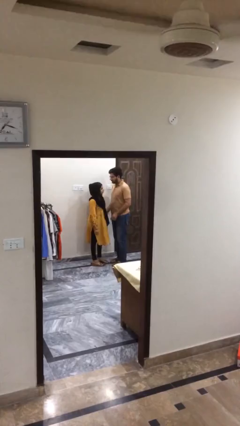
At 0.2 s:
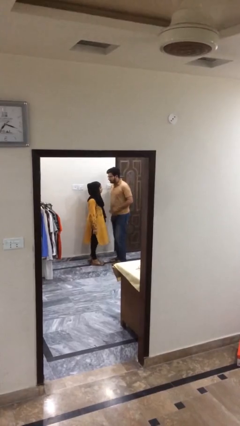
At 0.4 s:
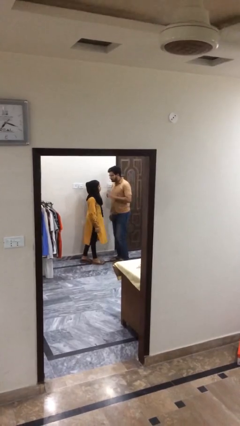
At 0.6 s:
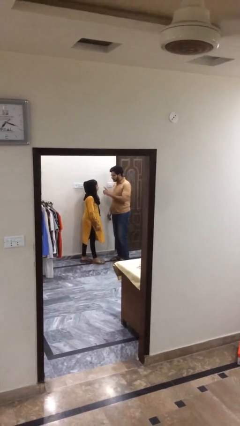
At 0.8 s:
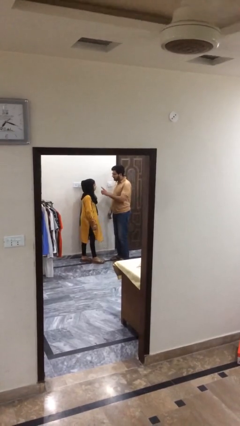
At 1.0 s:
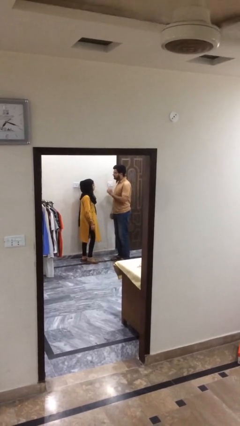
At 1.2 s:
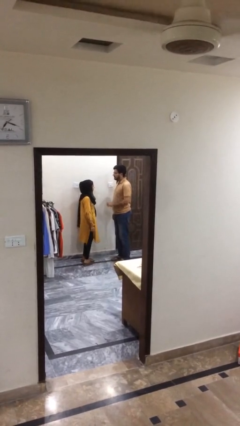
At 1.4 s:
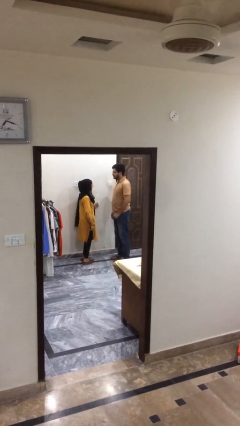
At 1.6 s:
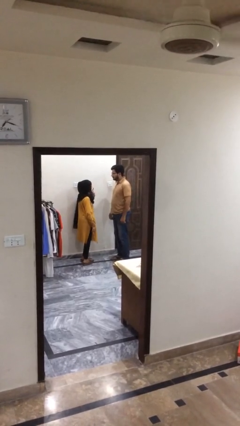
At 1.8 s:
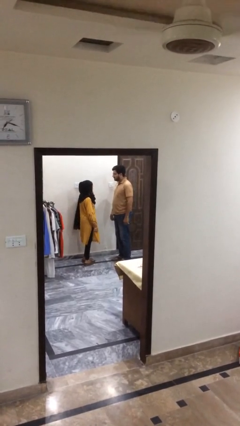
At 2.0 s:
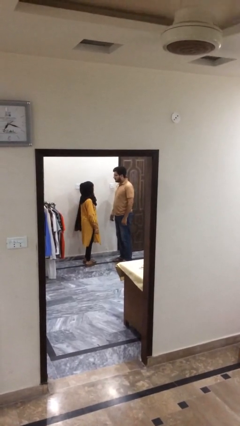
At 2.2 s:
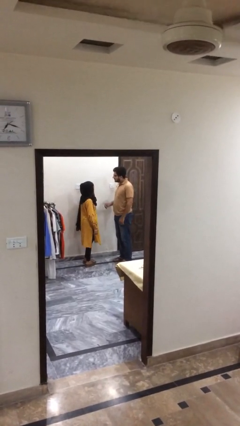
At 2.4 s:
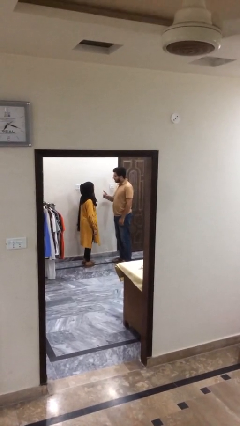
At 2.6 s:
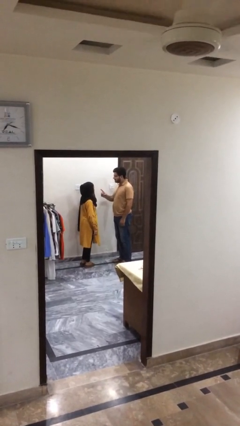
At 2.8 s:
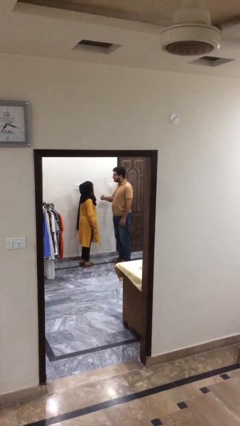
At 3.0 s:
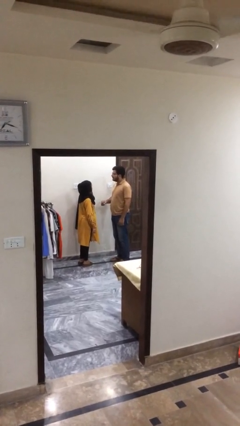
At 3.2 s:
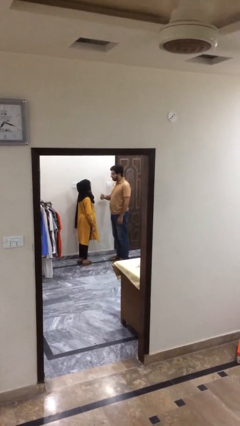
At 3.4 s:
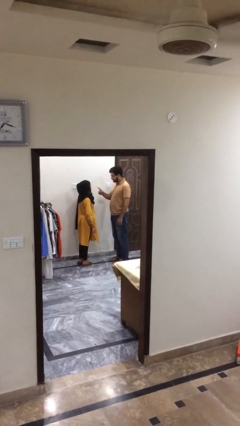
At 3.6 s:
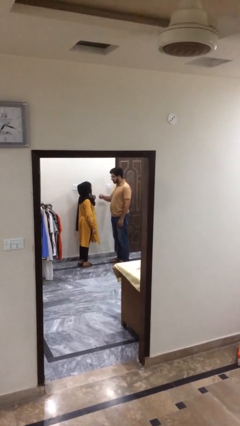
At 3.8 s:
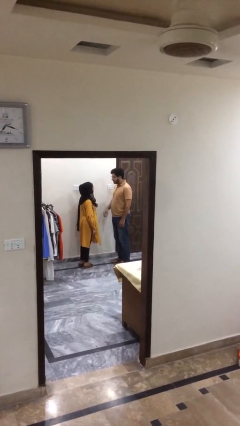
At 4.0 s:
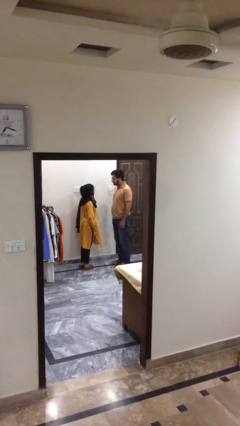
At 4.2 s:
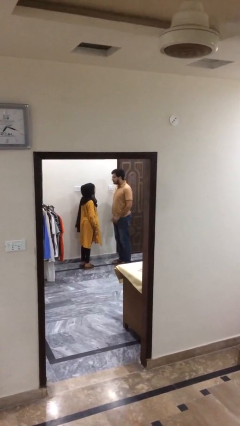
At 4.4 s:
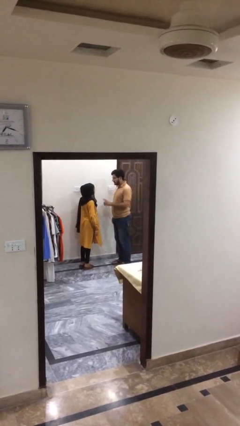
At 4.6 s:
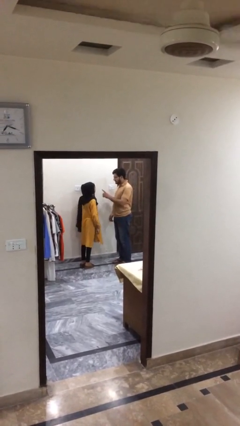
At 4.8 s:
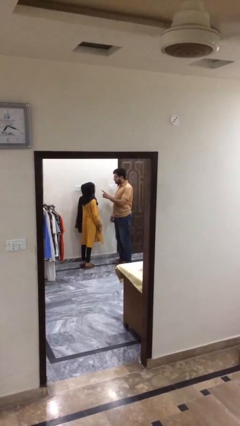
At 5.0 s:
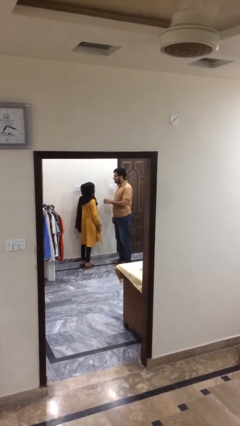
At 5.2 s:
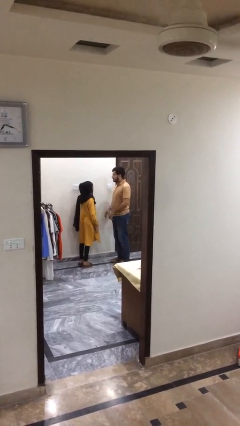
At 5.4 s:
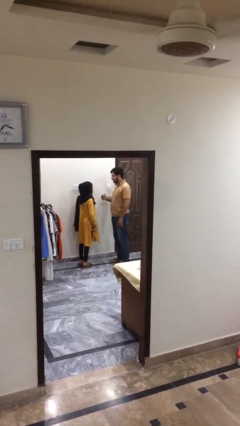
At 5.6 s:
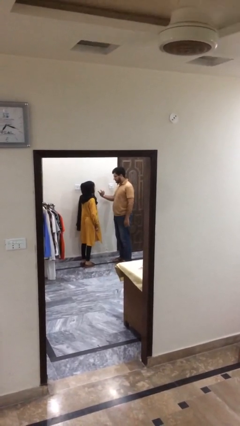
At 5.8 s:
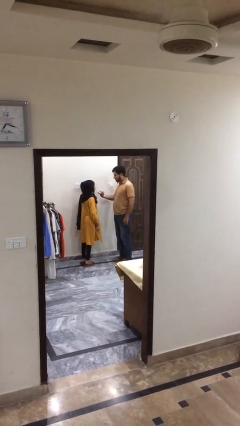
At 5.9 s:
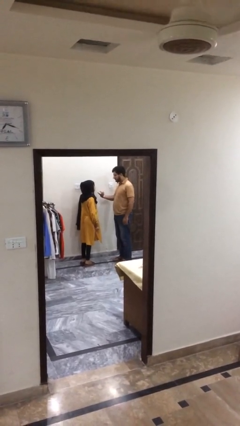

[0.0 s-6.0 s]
person talks to person

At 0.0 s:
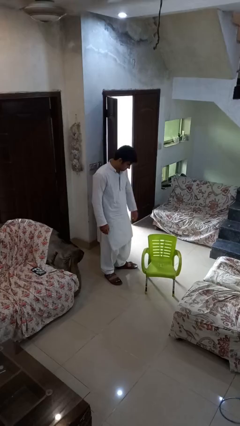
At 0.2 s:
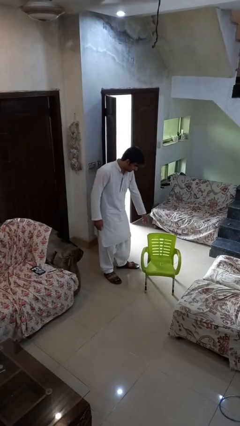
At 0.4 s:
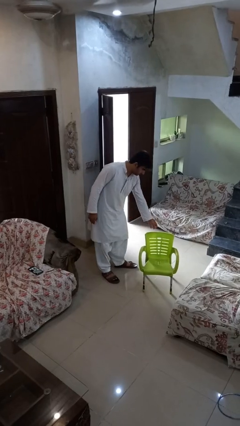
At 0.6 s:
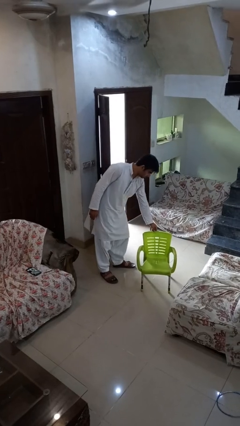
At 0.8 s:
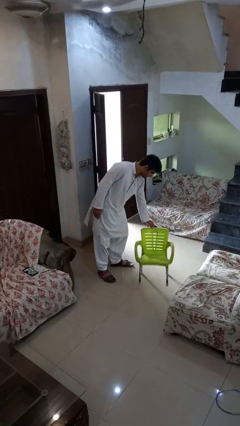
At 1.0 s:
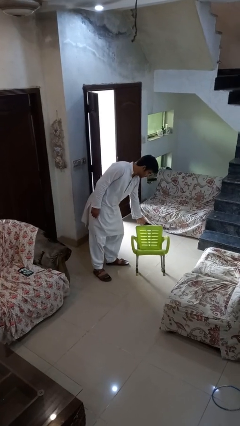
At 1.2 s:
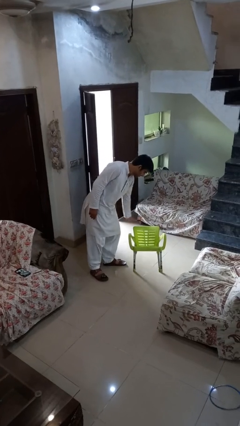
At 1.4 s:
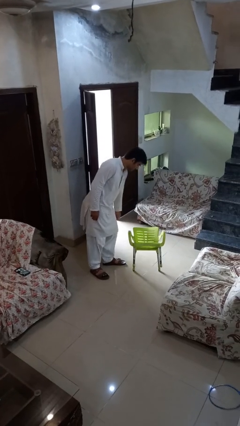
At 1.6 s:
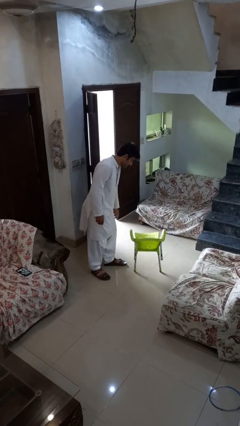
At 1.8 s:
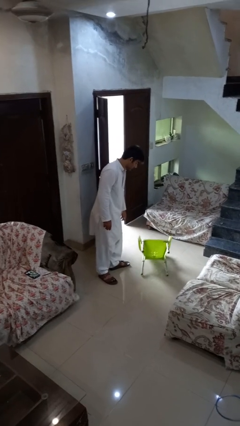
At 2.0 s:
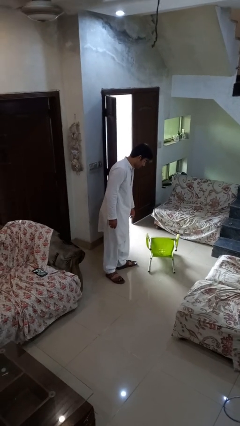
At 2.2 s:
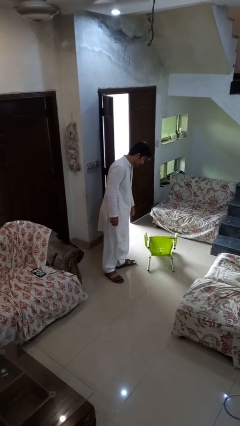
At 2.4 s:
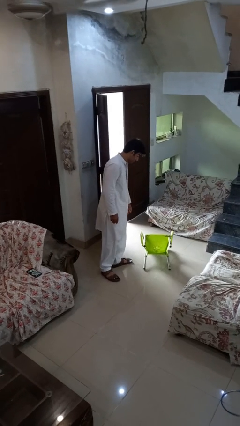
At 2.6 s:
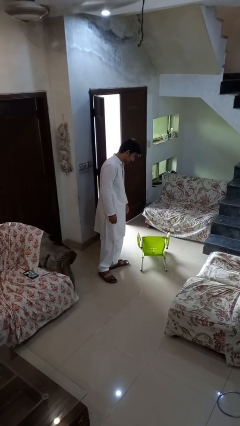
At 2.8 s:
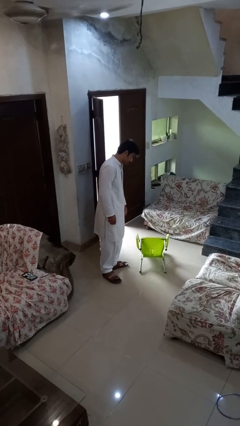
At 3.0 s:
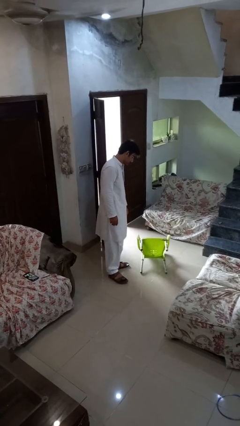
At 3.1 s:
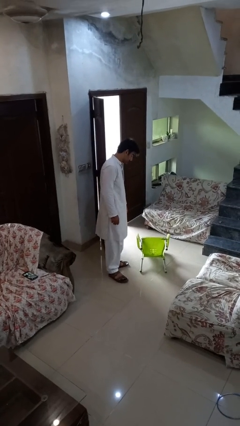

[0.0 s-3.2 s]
person knocks over furniture

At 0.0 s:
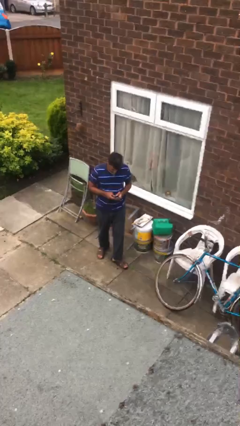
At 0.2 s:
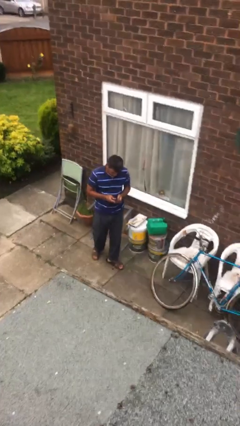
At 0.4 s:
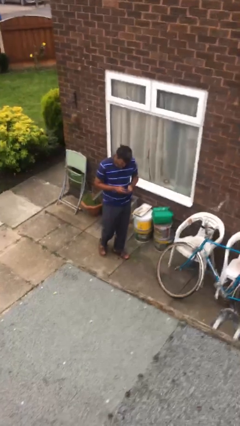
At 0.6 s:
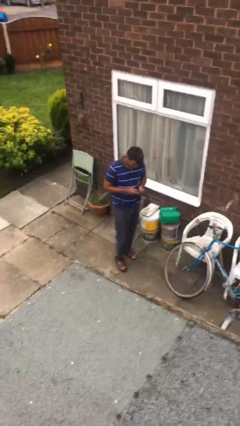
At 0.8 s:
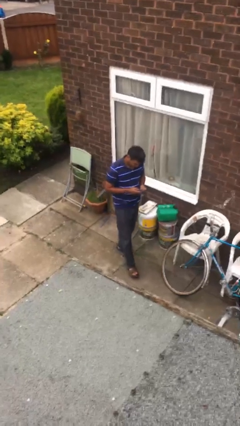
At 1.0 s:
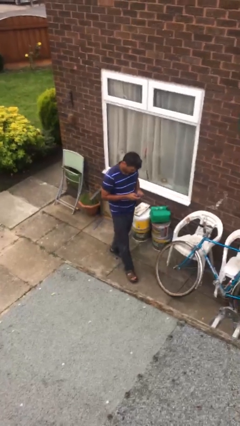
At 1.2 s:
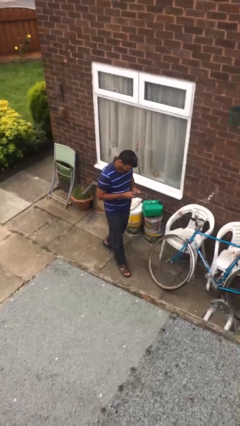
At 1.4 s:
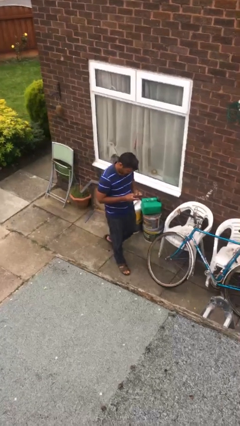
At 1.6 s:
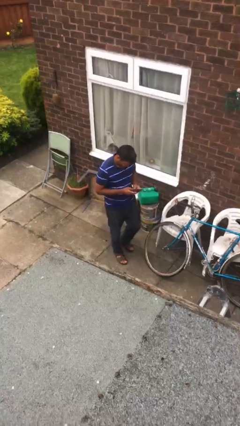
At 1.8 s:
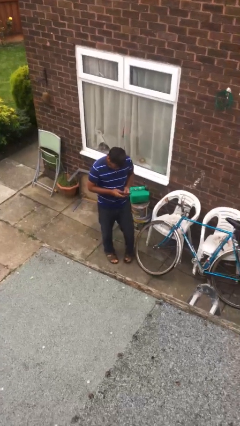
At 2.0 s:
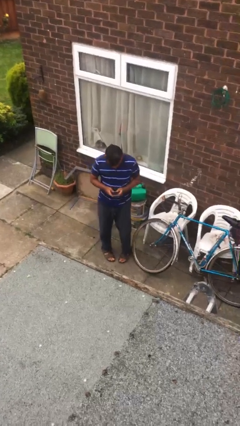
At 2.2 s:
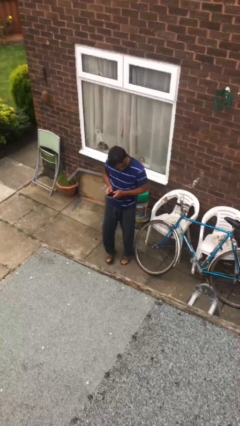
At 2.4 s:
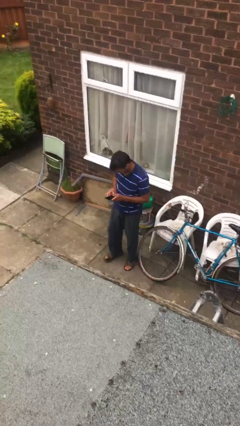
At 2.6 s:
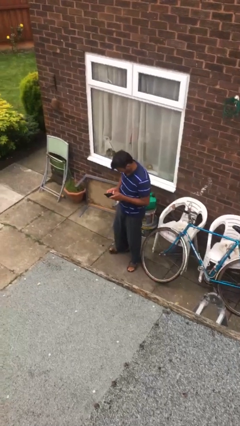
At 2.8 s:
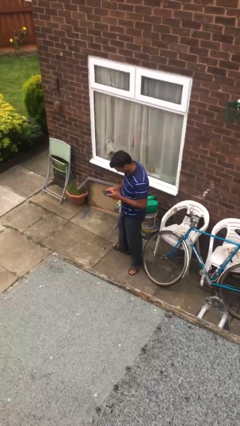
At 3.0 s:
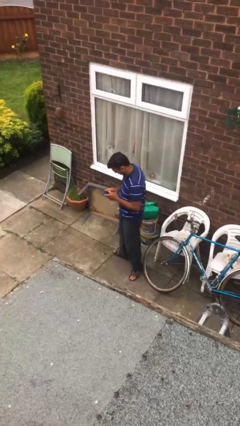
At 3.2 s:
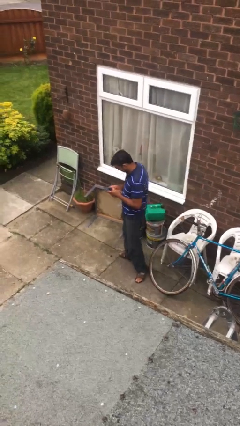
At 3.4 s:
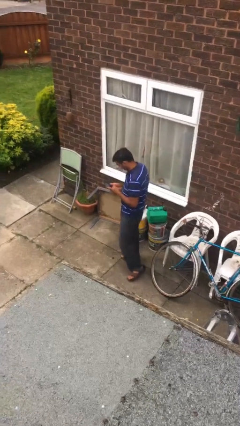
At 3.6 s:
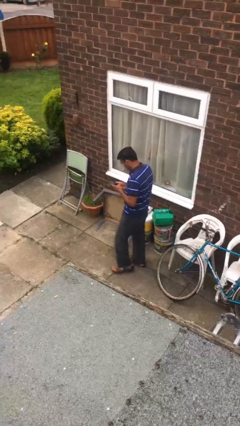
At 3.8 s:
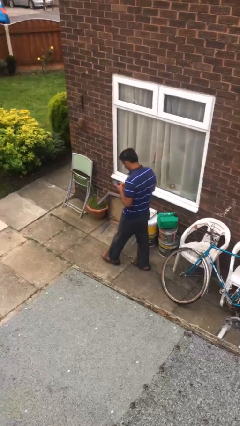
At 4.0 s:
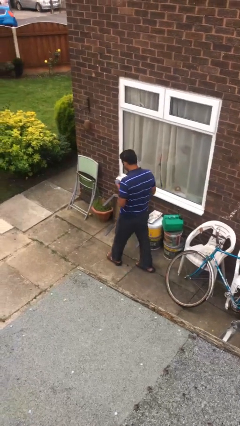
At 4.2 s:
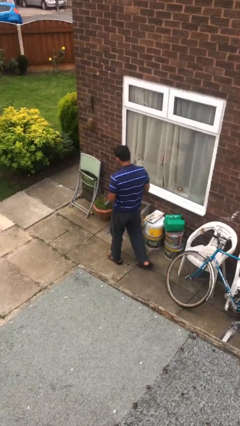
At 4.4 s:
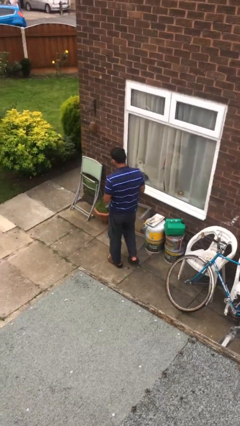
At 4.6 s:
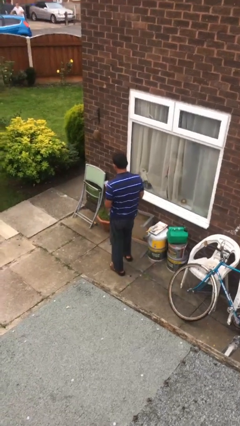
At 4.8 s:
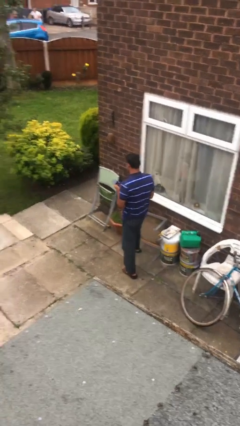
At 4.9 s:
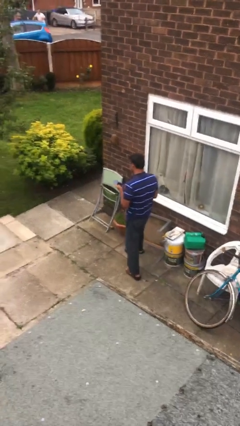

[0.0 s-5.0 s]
person texts on phone

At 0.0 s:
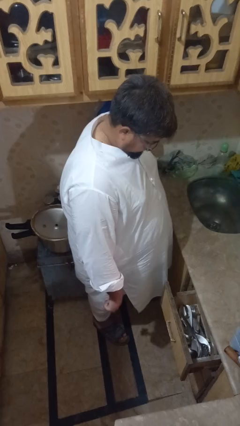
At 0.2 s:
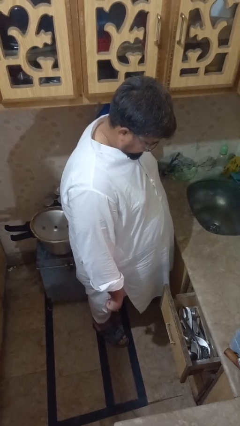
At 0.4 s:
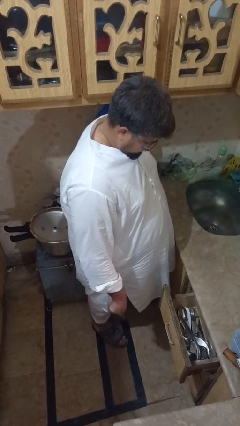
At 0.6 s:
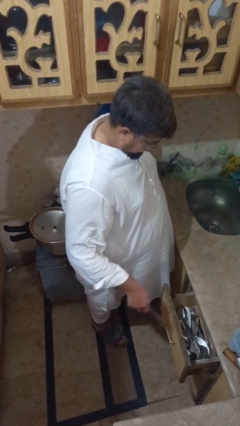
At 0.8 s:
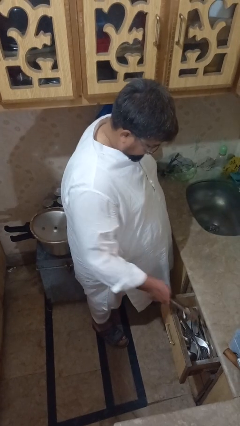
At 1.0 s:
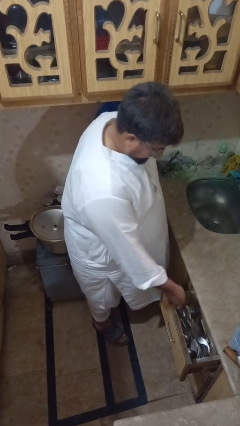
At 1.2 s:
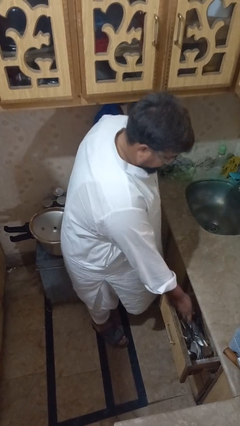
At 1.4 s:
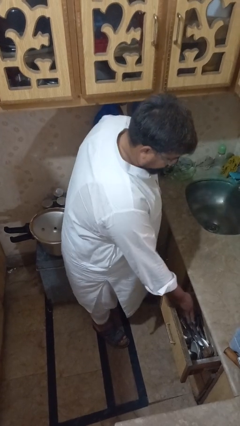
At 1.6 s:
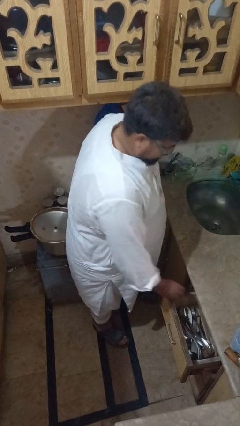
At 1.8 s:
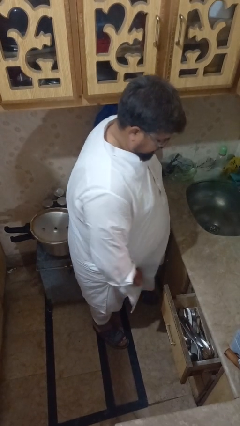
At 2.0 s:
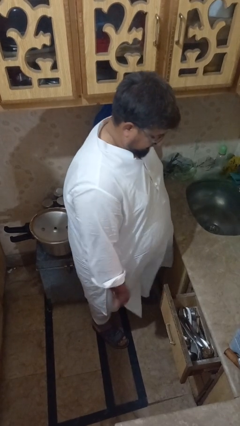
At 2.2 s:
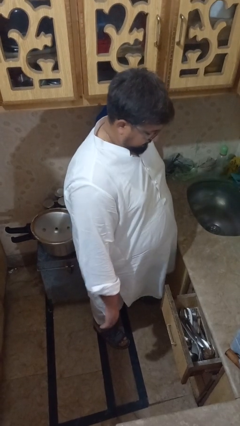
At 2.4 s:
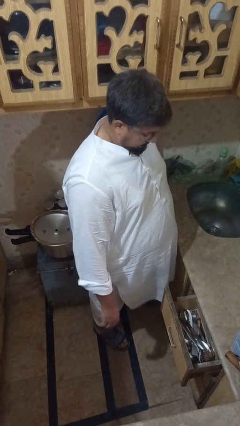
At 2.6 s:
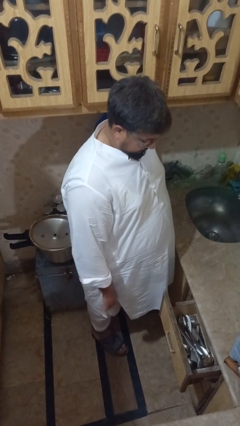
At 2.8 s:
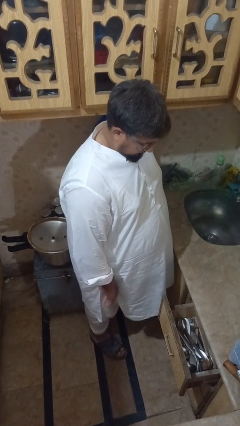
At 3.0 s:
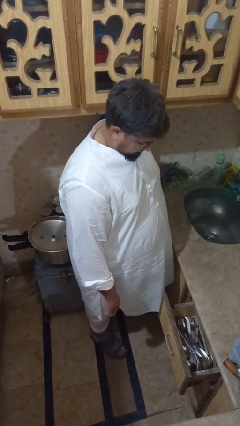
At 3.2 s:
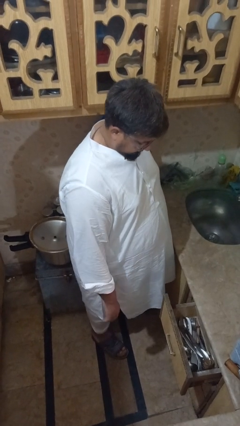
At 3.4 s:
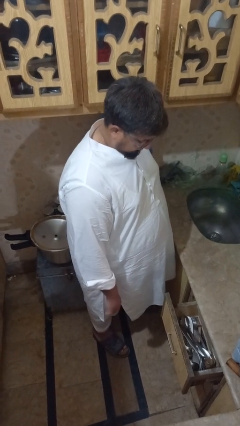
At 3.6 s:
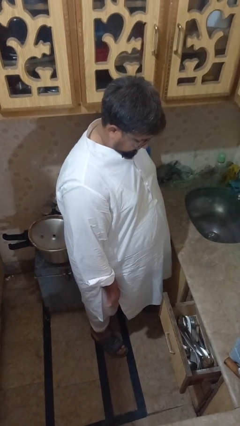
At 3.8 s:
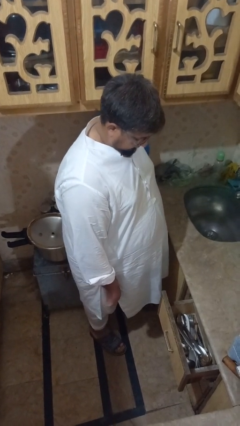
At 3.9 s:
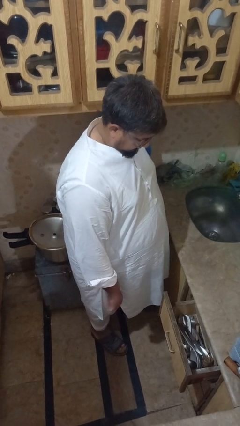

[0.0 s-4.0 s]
person puts object into kitchen drawer
